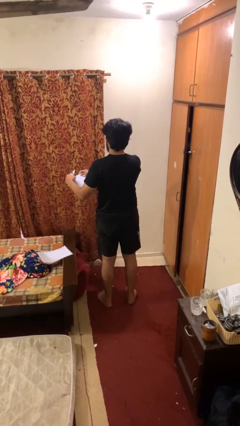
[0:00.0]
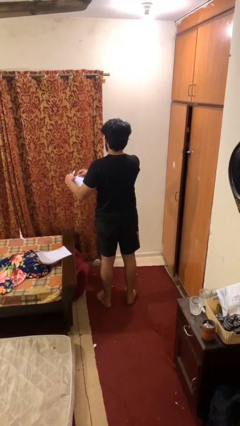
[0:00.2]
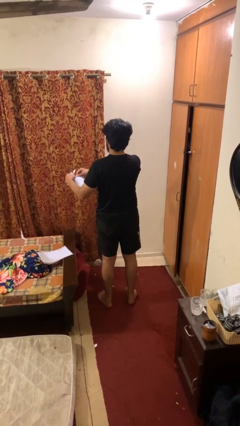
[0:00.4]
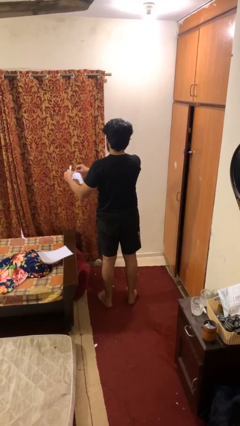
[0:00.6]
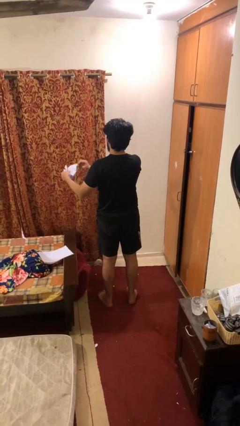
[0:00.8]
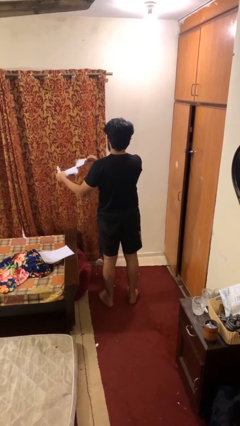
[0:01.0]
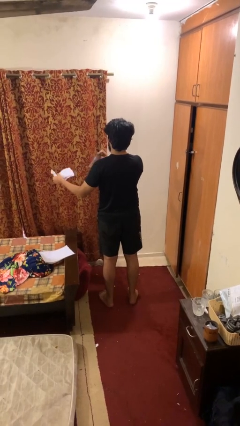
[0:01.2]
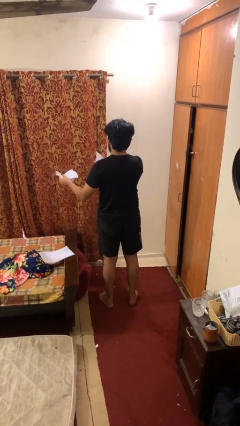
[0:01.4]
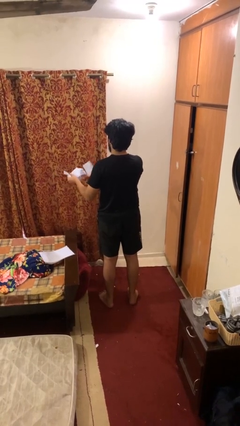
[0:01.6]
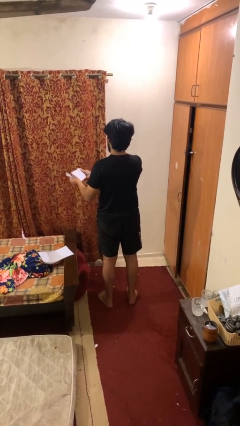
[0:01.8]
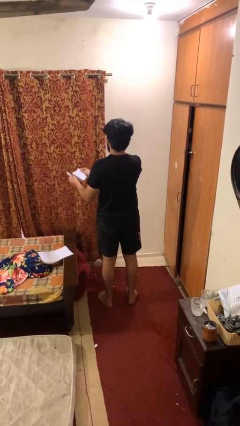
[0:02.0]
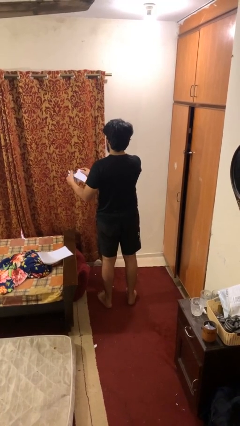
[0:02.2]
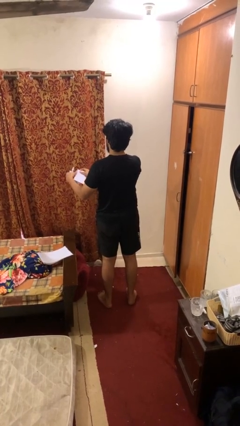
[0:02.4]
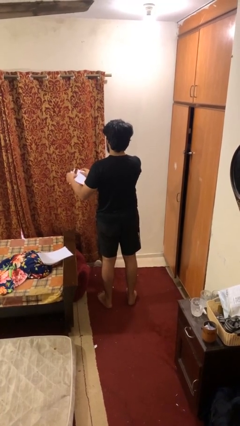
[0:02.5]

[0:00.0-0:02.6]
person tears paper

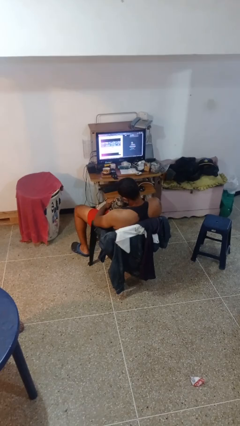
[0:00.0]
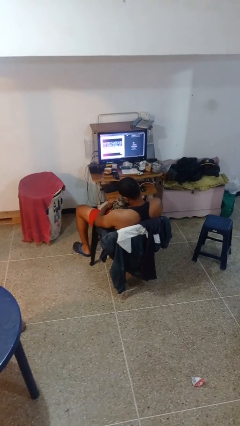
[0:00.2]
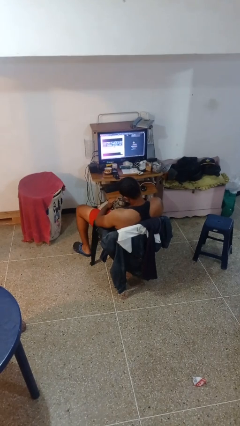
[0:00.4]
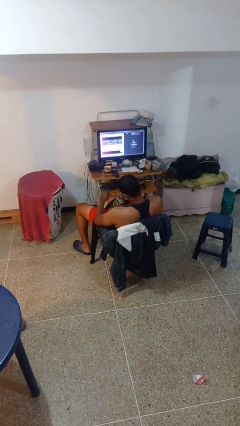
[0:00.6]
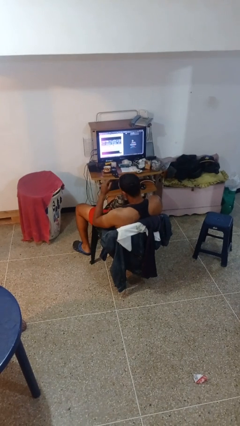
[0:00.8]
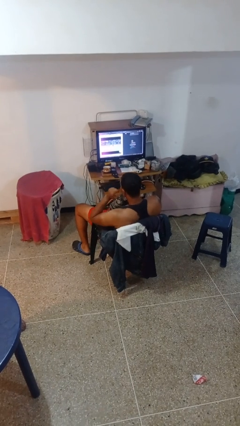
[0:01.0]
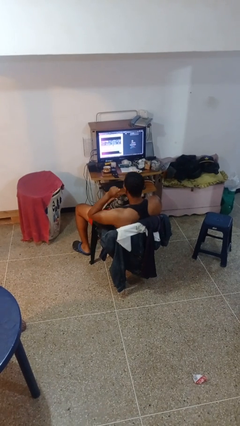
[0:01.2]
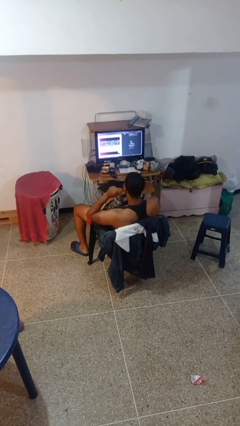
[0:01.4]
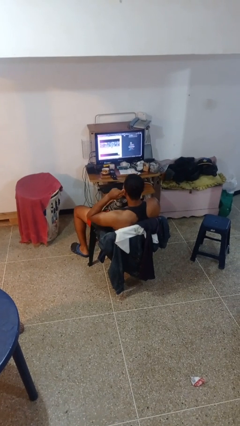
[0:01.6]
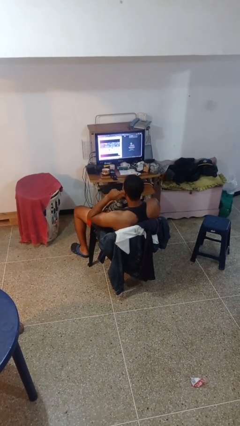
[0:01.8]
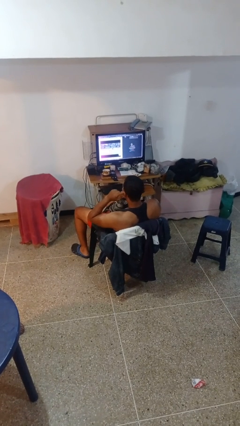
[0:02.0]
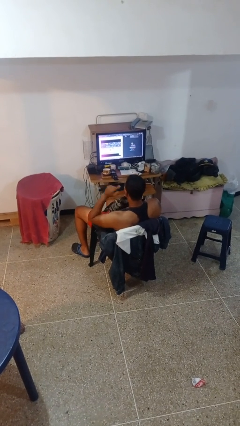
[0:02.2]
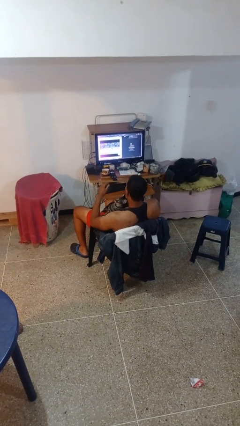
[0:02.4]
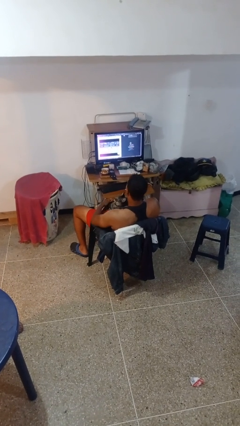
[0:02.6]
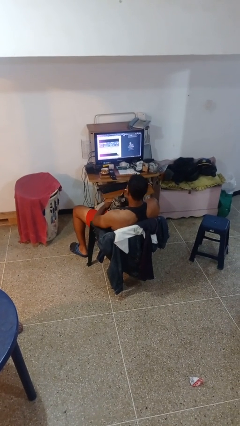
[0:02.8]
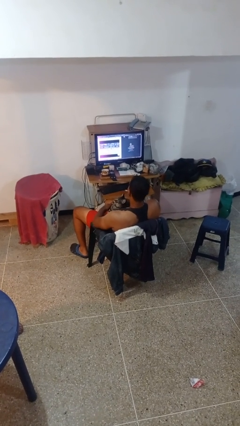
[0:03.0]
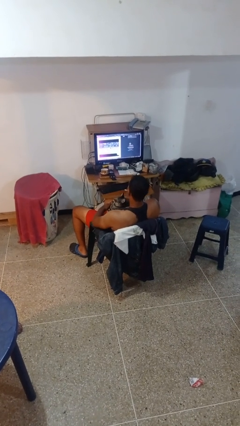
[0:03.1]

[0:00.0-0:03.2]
person gestures listen closely

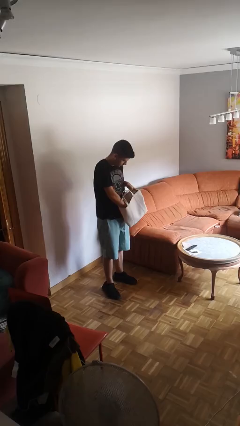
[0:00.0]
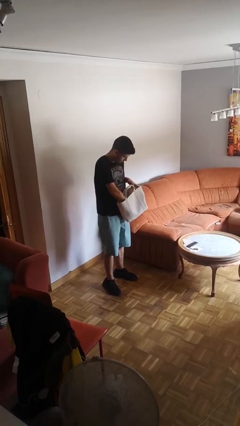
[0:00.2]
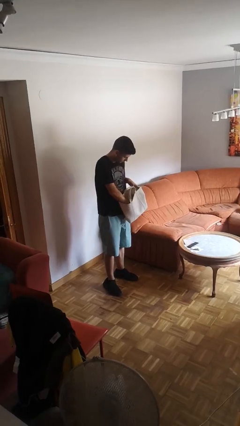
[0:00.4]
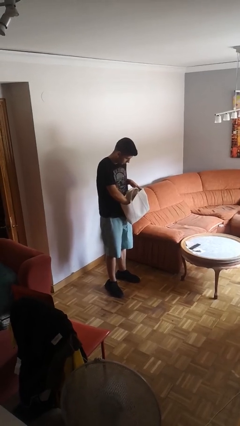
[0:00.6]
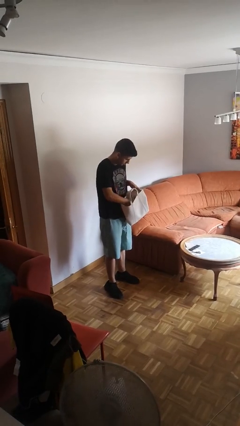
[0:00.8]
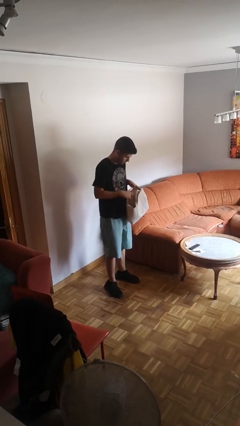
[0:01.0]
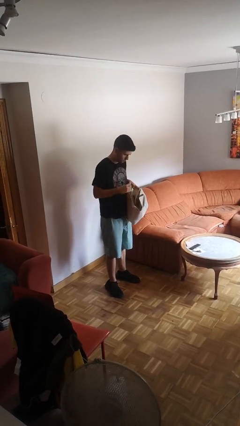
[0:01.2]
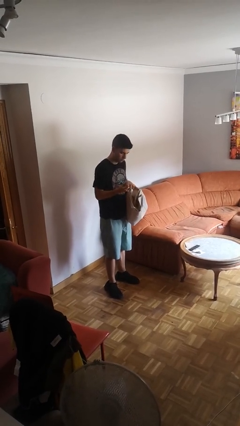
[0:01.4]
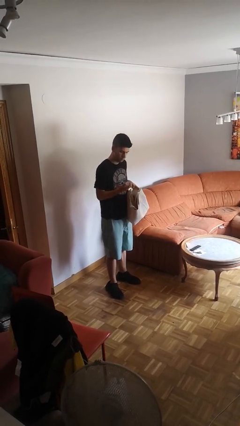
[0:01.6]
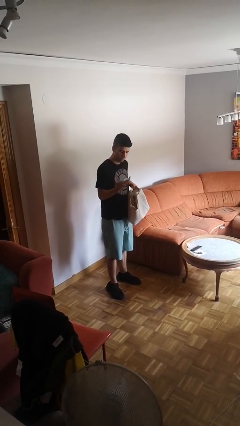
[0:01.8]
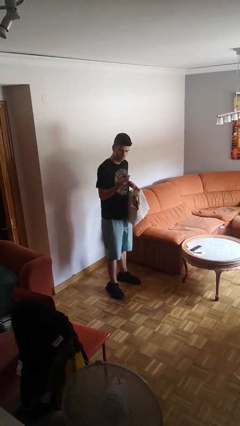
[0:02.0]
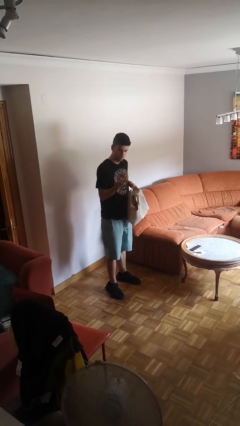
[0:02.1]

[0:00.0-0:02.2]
person takes object from purse

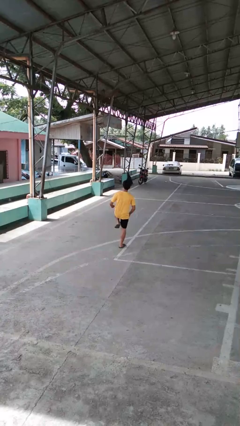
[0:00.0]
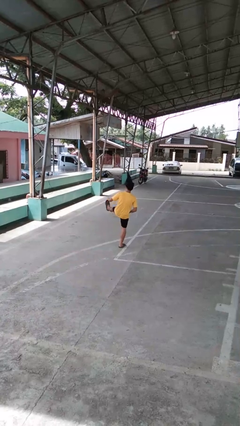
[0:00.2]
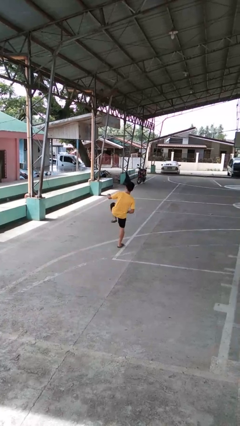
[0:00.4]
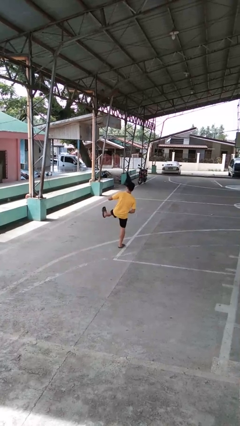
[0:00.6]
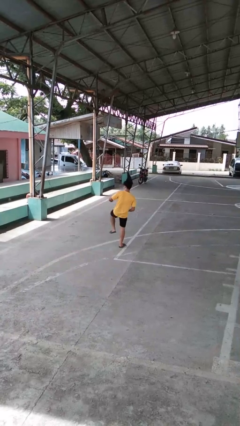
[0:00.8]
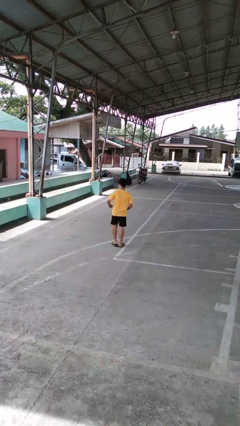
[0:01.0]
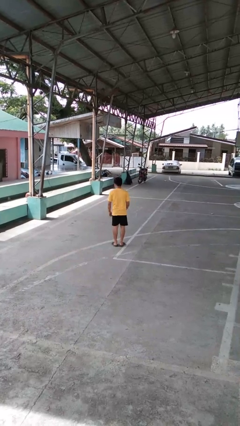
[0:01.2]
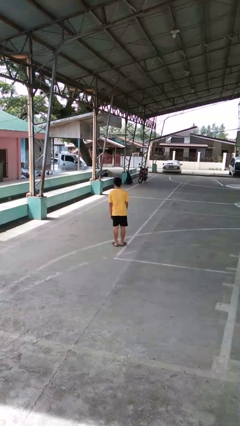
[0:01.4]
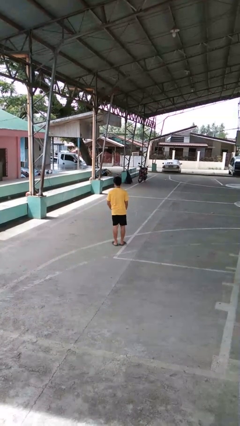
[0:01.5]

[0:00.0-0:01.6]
person karate kicks

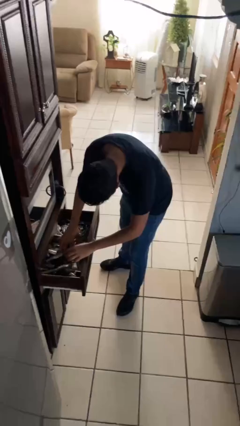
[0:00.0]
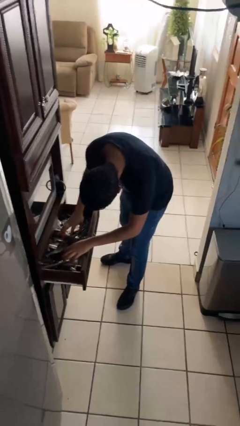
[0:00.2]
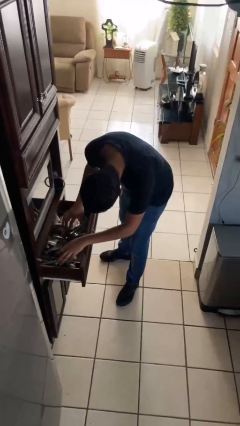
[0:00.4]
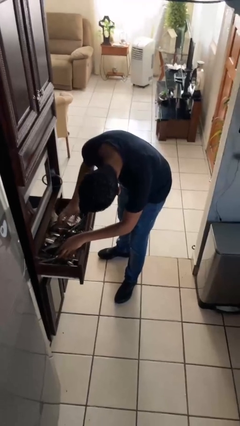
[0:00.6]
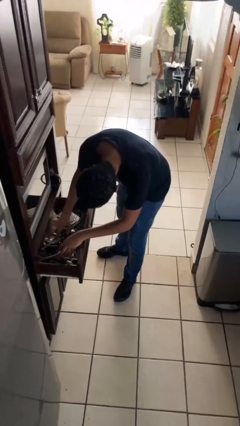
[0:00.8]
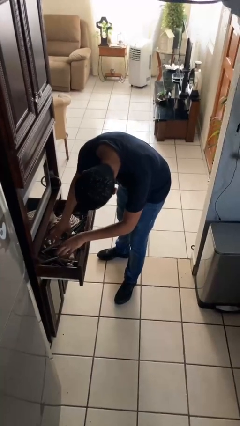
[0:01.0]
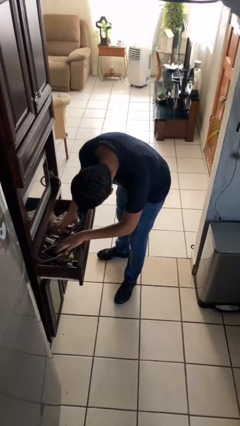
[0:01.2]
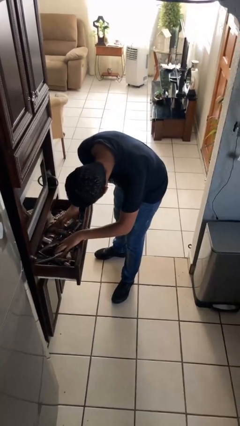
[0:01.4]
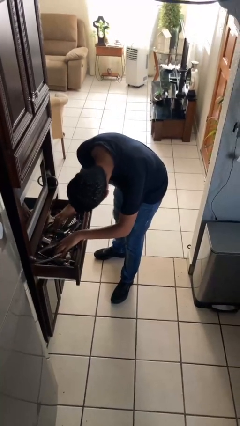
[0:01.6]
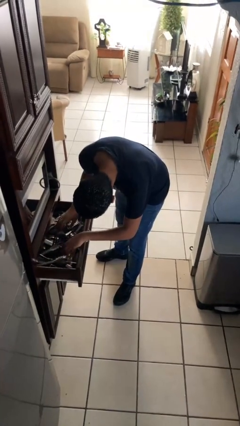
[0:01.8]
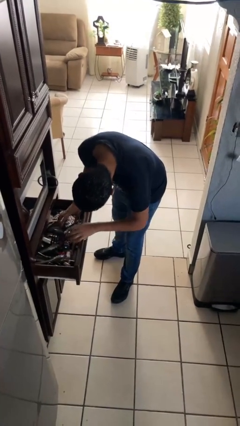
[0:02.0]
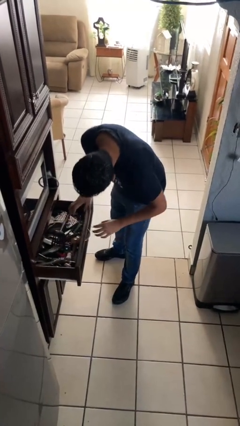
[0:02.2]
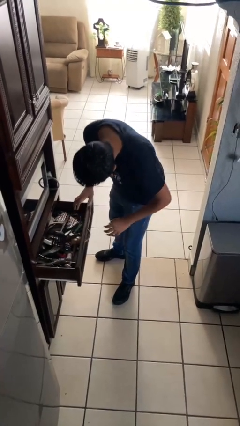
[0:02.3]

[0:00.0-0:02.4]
person searches in kitchen drawer

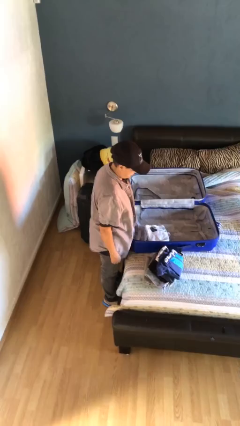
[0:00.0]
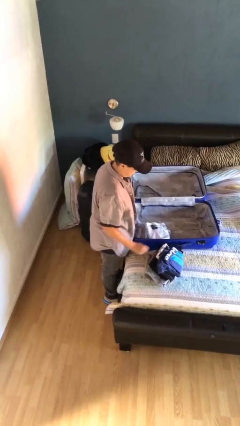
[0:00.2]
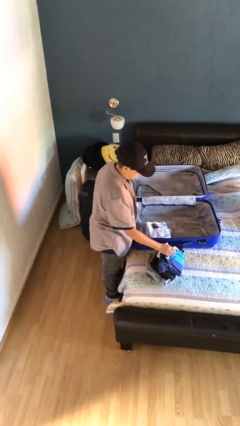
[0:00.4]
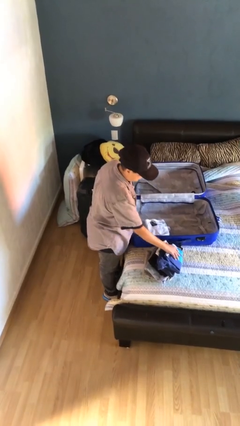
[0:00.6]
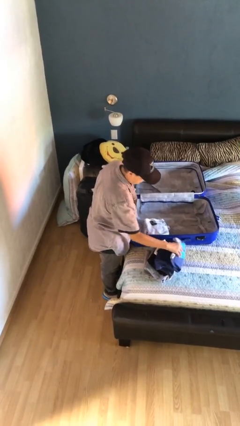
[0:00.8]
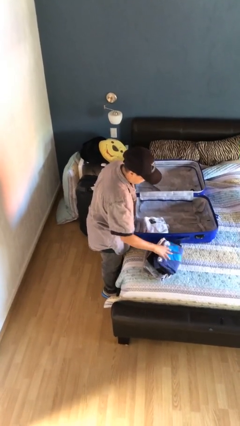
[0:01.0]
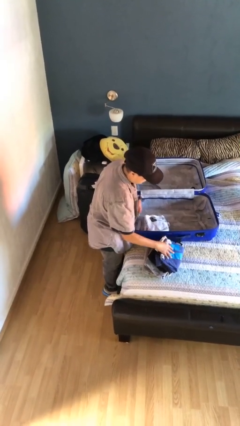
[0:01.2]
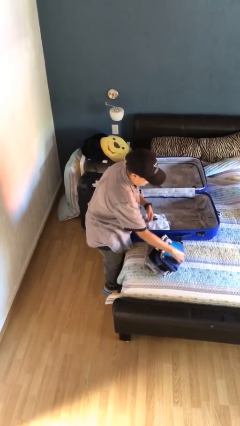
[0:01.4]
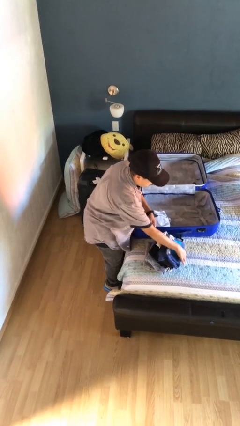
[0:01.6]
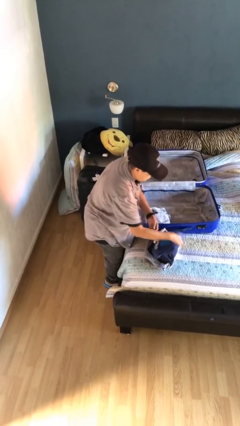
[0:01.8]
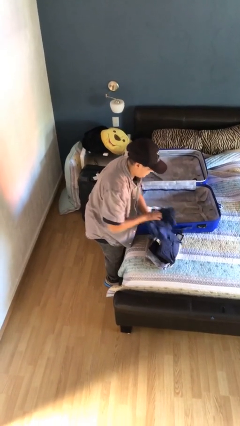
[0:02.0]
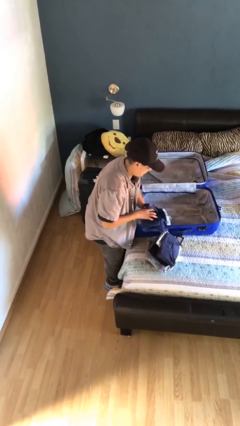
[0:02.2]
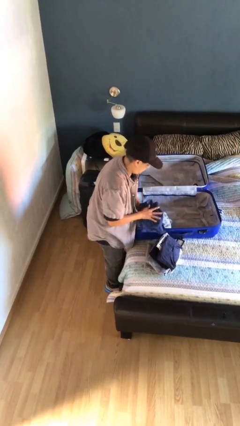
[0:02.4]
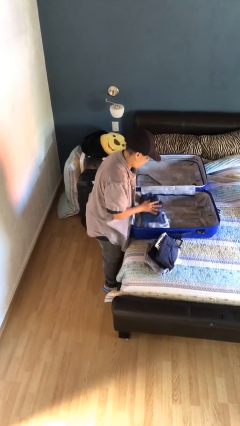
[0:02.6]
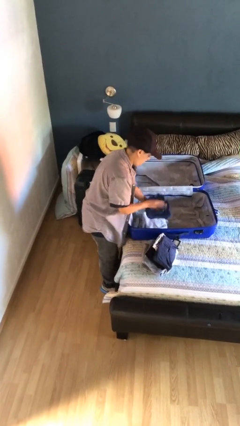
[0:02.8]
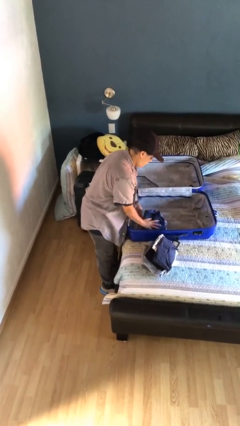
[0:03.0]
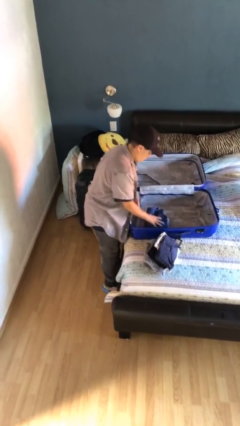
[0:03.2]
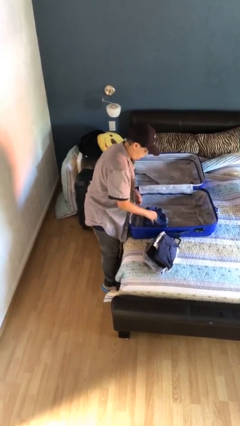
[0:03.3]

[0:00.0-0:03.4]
person loads clothes into suitcase

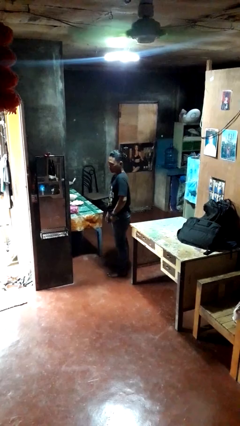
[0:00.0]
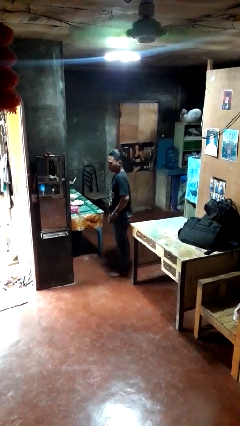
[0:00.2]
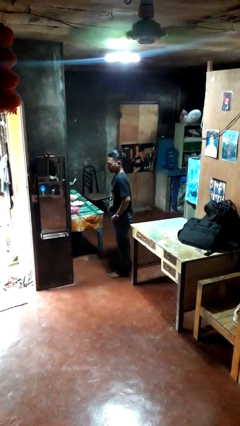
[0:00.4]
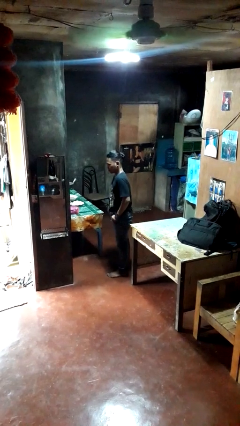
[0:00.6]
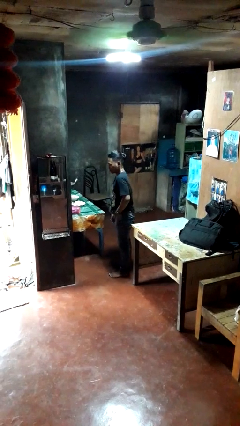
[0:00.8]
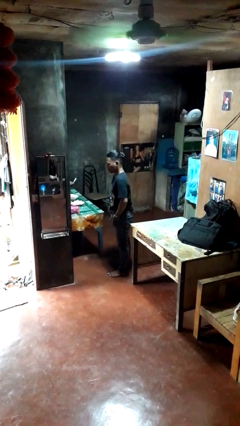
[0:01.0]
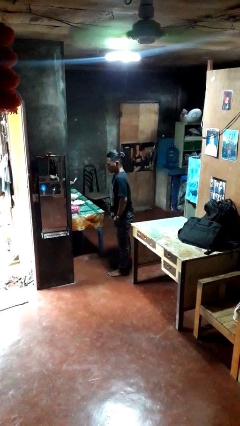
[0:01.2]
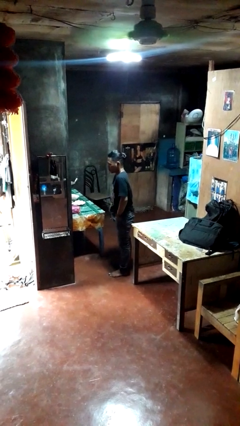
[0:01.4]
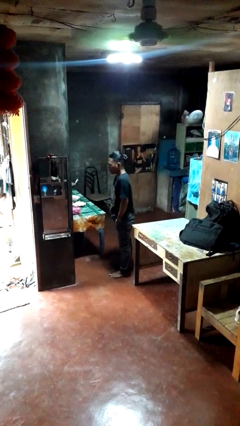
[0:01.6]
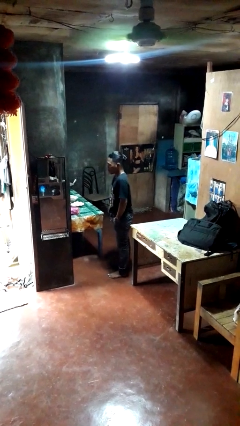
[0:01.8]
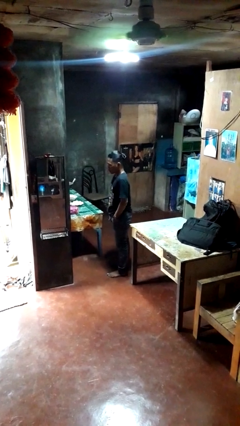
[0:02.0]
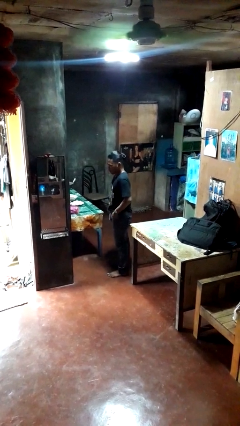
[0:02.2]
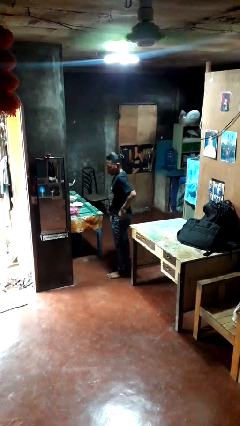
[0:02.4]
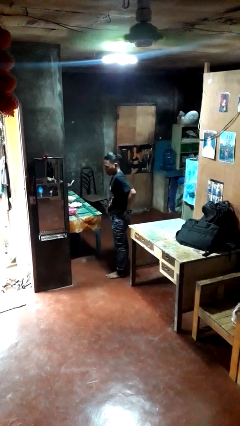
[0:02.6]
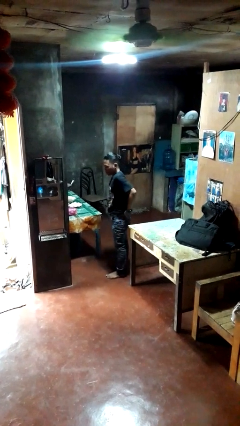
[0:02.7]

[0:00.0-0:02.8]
person puts hands in back pockets
